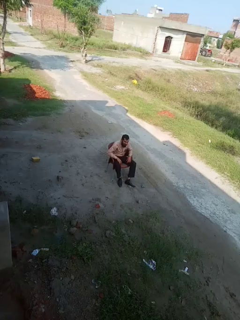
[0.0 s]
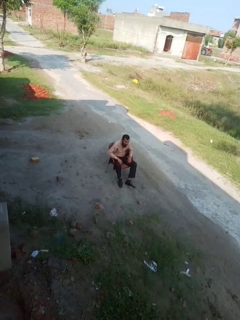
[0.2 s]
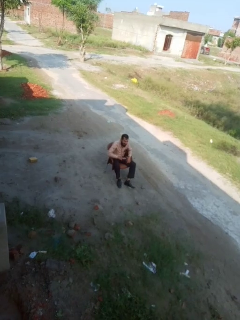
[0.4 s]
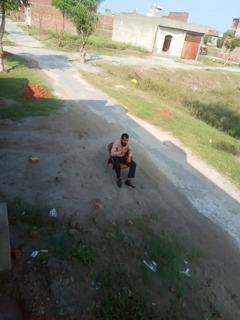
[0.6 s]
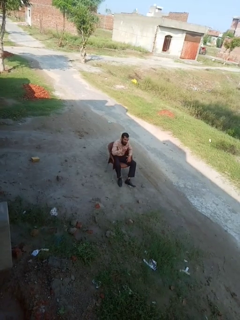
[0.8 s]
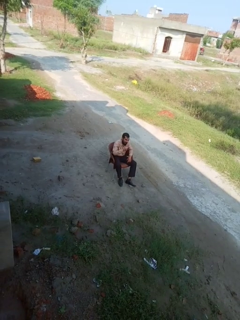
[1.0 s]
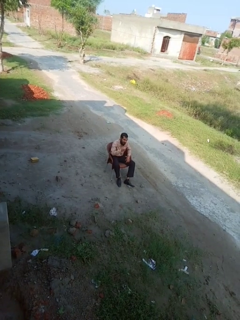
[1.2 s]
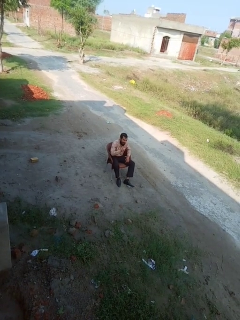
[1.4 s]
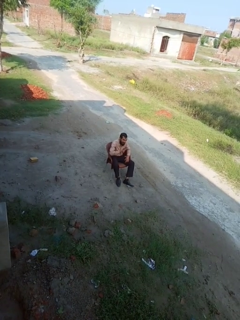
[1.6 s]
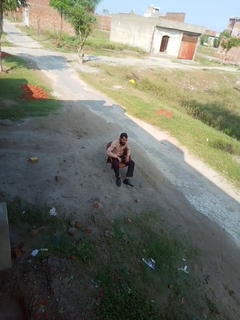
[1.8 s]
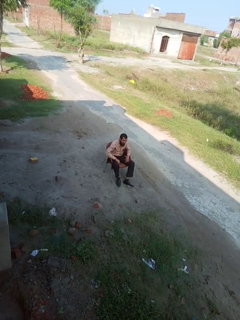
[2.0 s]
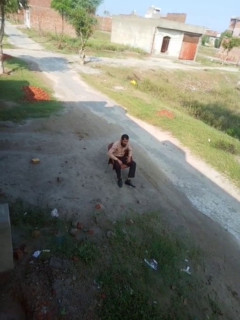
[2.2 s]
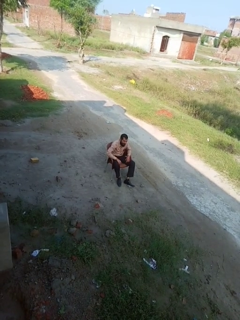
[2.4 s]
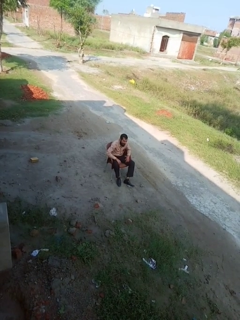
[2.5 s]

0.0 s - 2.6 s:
person gestures number four

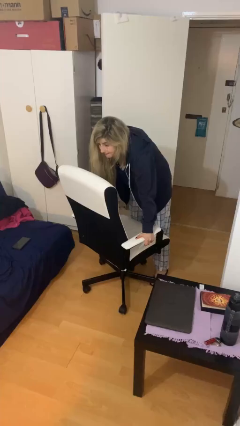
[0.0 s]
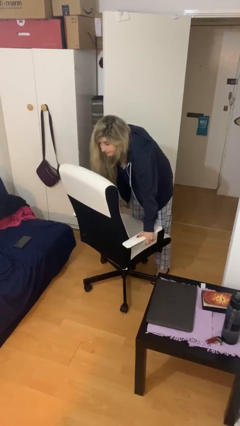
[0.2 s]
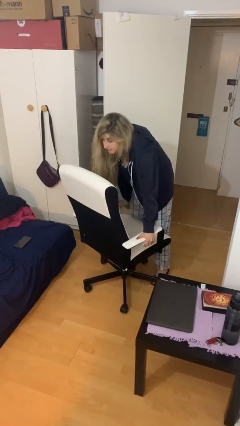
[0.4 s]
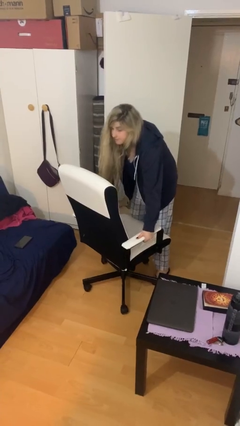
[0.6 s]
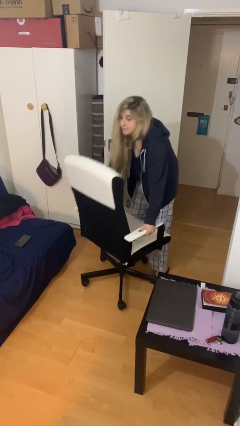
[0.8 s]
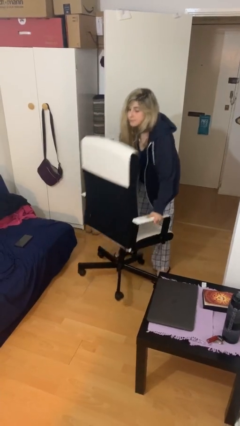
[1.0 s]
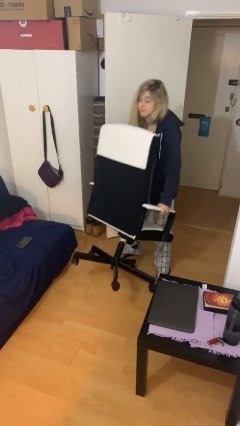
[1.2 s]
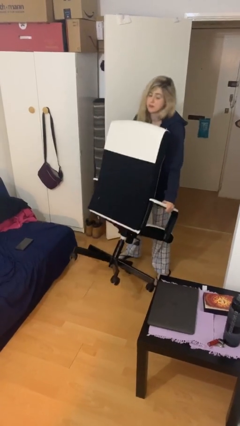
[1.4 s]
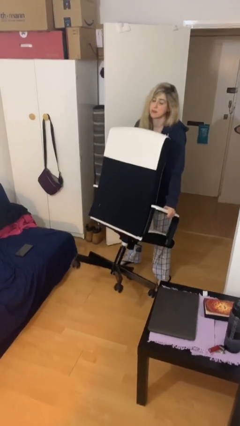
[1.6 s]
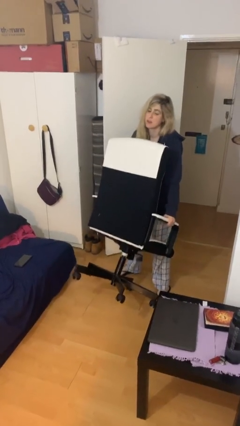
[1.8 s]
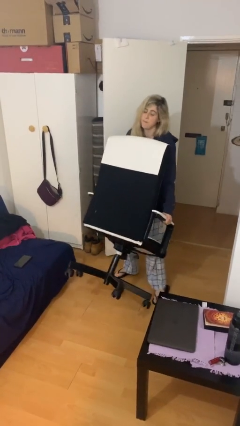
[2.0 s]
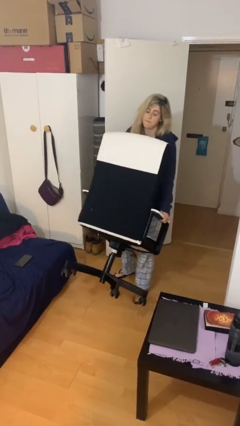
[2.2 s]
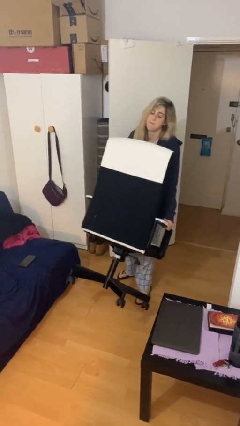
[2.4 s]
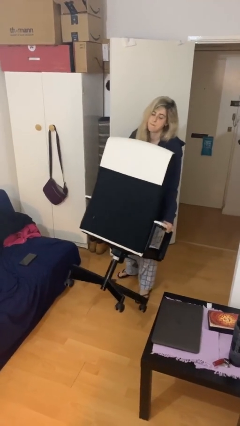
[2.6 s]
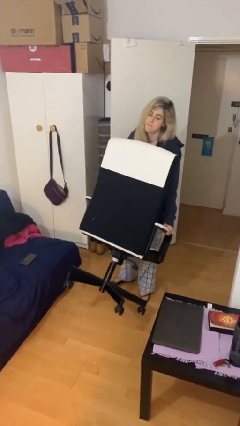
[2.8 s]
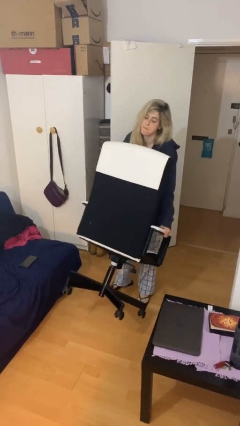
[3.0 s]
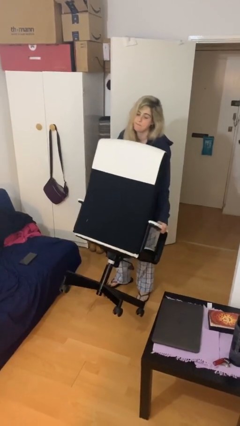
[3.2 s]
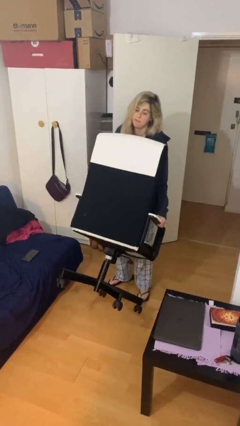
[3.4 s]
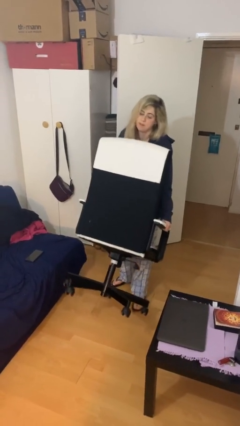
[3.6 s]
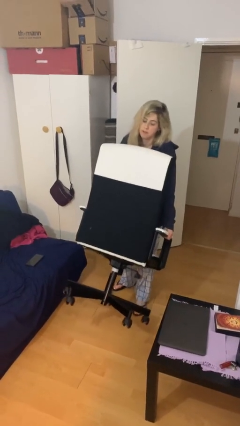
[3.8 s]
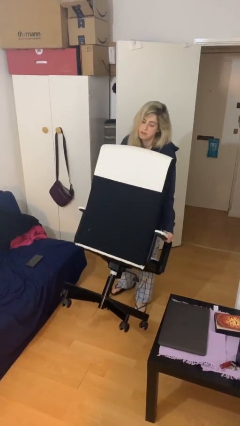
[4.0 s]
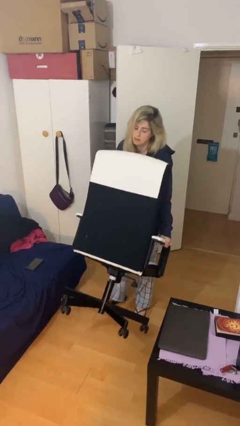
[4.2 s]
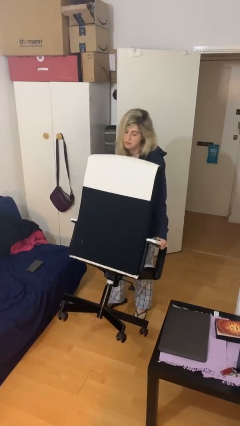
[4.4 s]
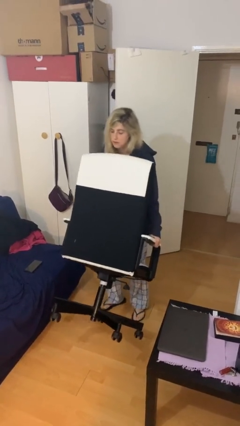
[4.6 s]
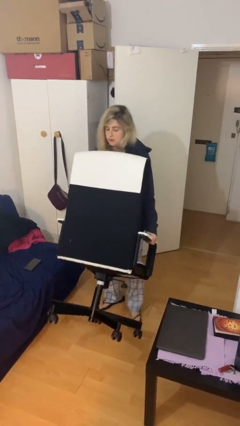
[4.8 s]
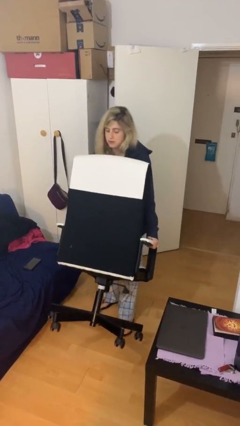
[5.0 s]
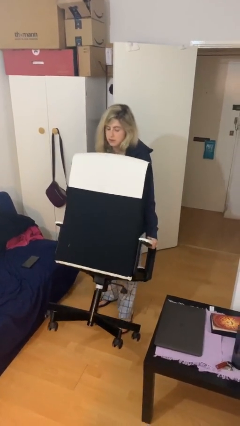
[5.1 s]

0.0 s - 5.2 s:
person carries heavy object

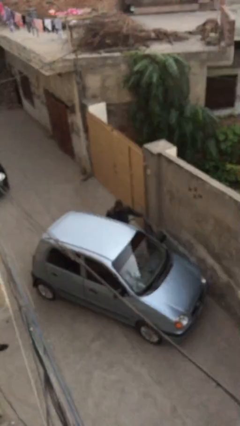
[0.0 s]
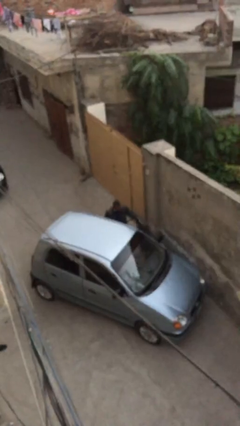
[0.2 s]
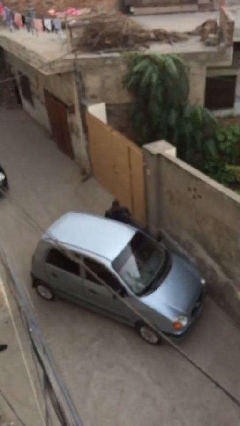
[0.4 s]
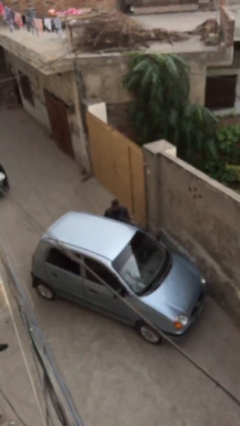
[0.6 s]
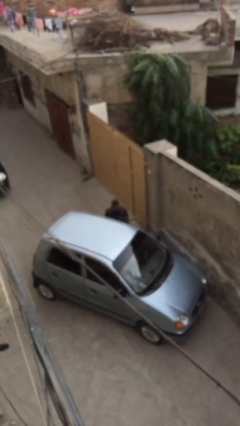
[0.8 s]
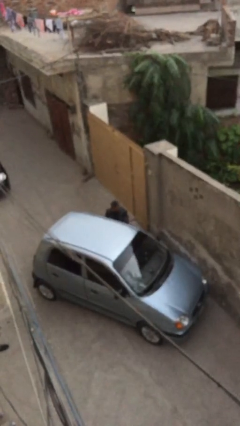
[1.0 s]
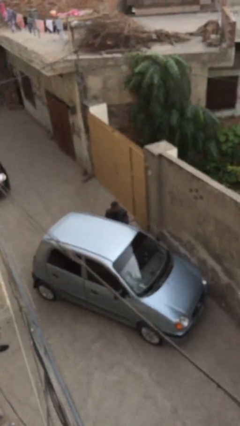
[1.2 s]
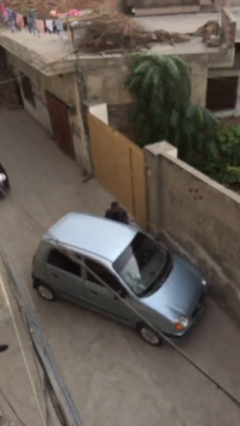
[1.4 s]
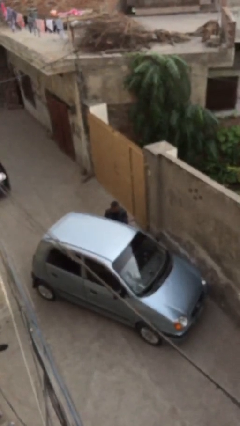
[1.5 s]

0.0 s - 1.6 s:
person closes car door

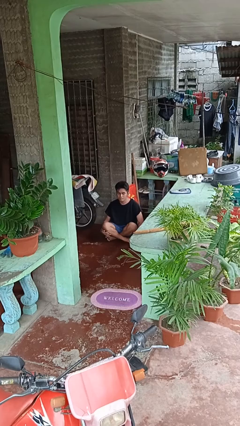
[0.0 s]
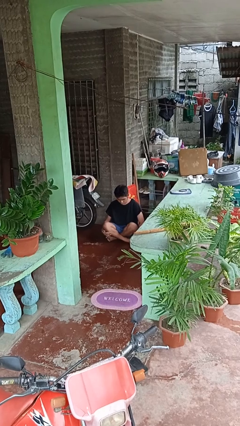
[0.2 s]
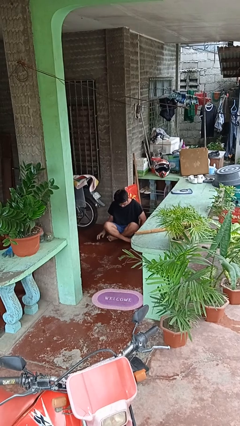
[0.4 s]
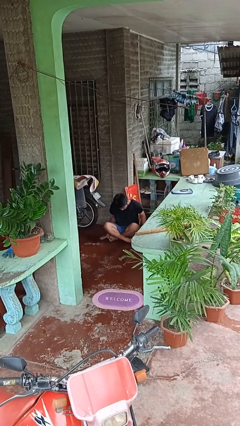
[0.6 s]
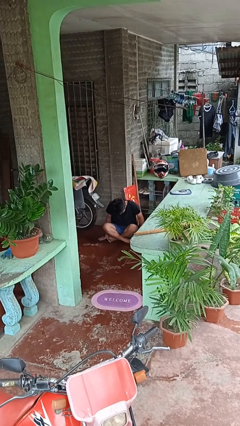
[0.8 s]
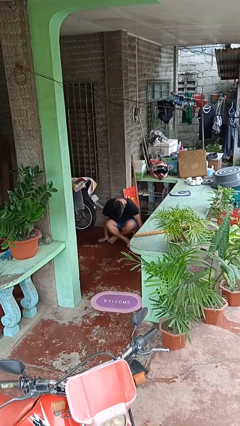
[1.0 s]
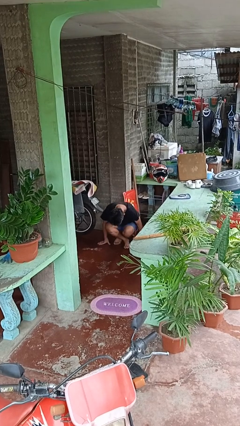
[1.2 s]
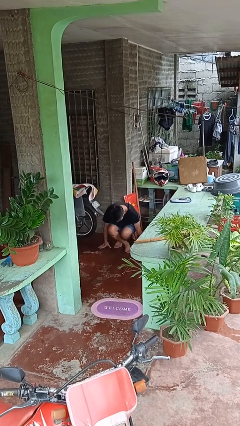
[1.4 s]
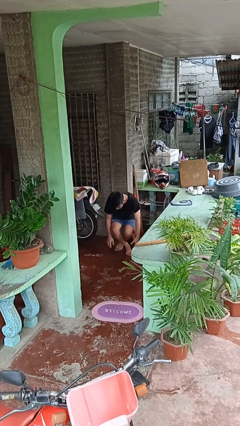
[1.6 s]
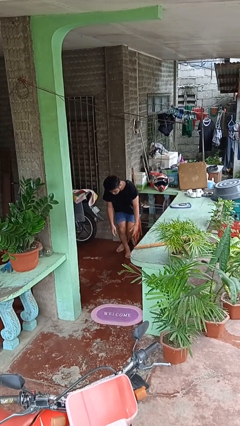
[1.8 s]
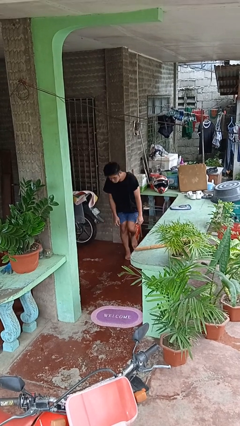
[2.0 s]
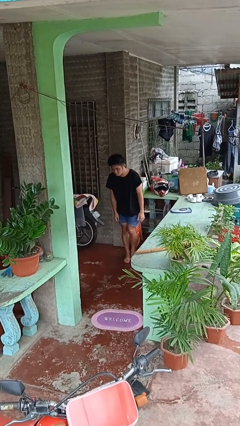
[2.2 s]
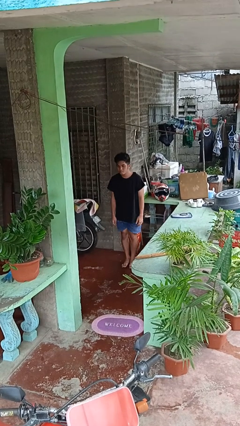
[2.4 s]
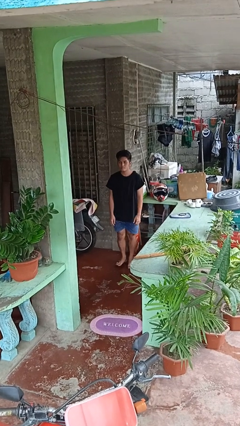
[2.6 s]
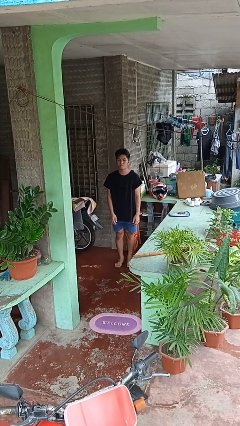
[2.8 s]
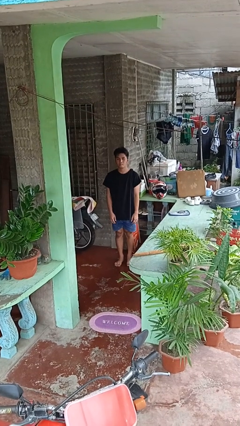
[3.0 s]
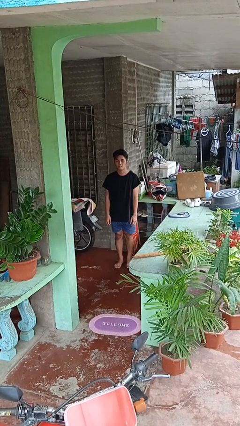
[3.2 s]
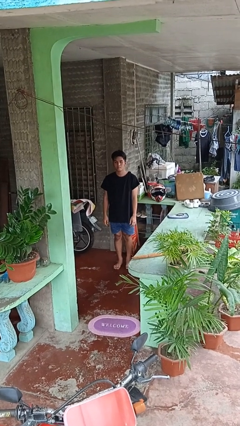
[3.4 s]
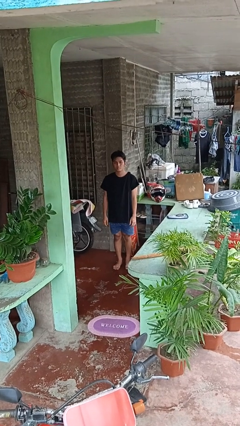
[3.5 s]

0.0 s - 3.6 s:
person stands up from floor

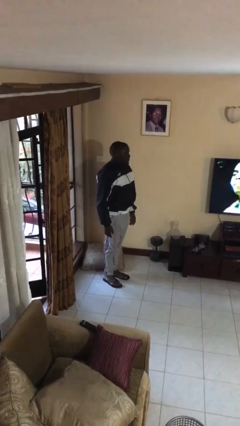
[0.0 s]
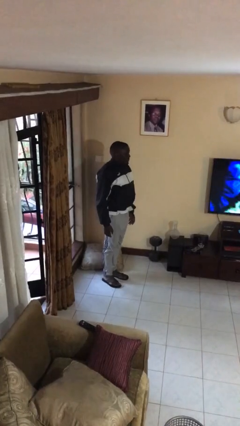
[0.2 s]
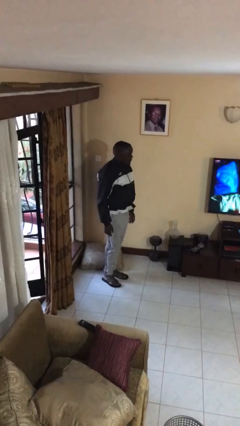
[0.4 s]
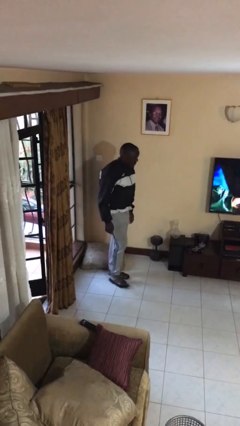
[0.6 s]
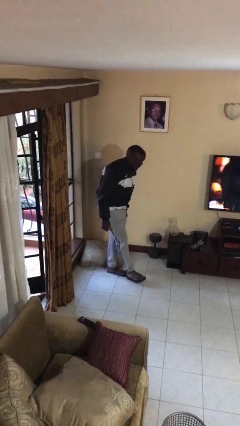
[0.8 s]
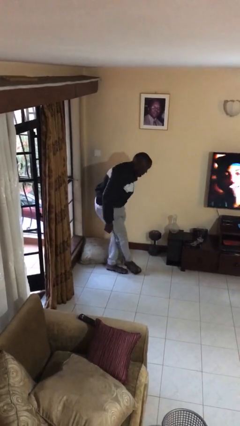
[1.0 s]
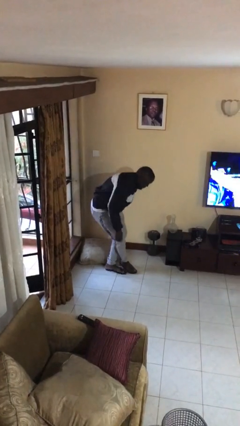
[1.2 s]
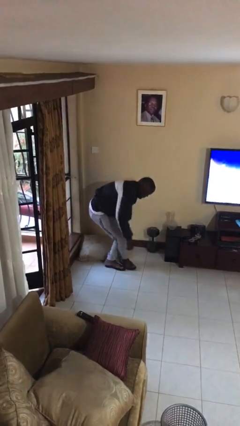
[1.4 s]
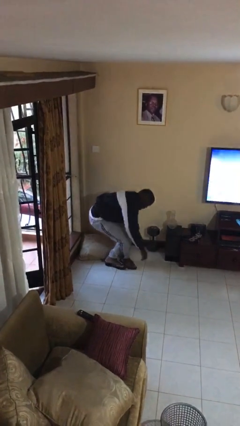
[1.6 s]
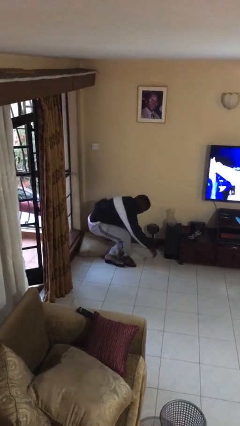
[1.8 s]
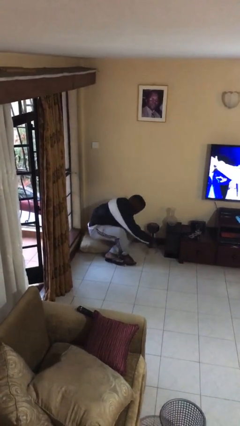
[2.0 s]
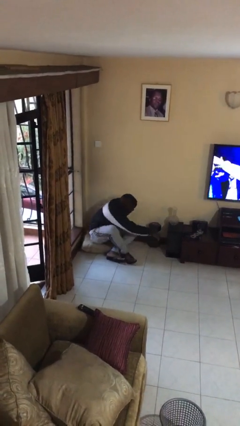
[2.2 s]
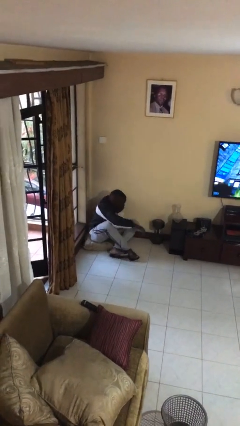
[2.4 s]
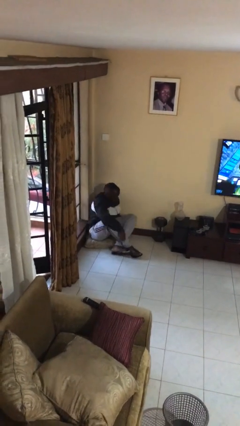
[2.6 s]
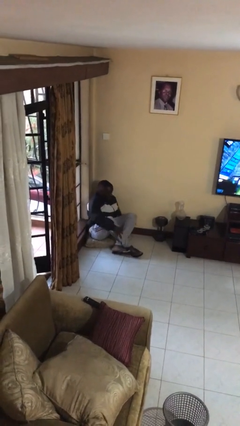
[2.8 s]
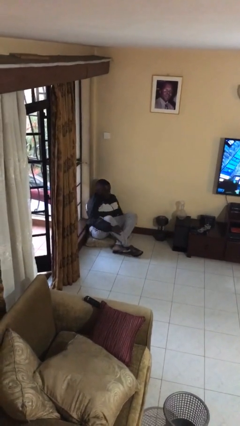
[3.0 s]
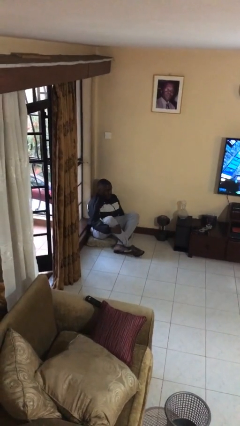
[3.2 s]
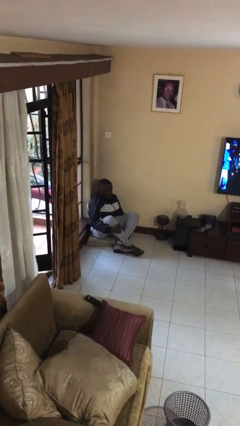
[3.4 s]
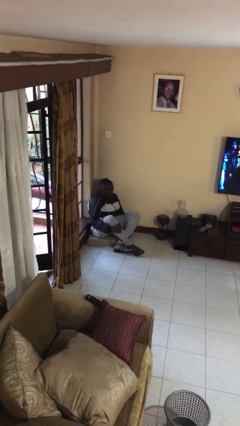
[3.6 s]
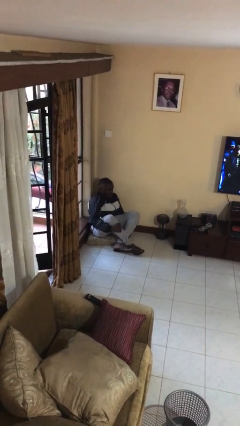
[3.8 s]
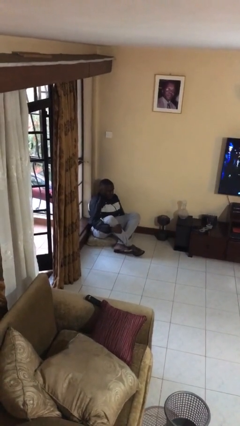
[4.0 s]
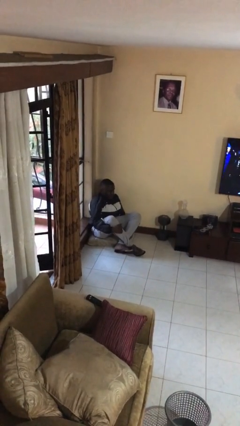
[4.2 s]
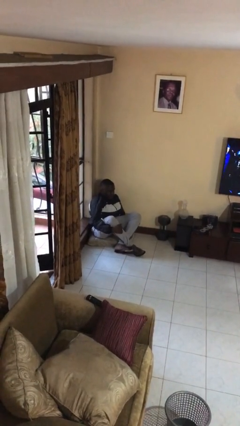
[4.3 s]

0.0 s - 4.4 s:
person sits crisscross

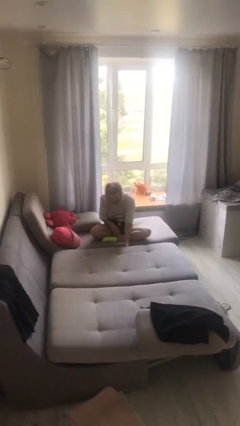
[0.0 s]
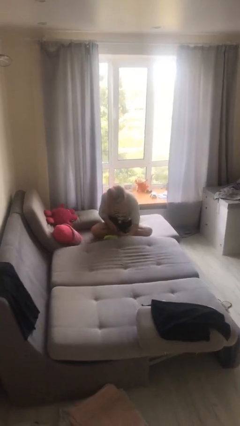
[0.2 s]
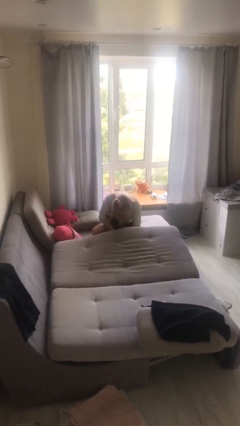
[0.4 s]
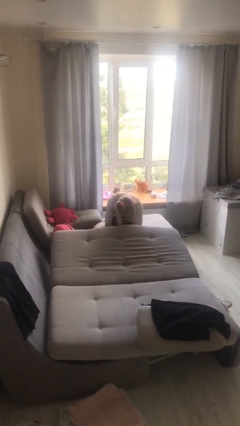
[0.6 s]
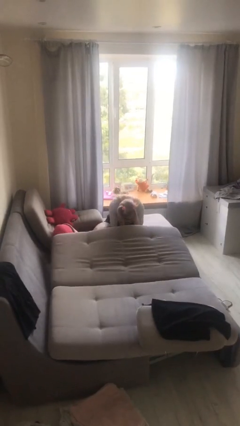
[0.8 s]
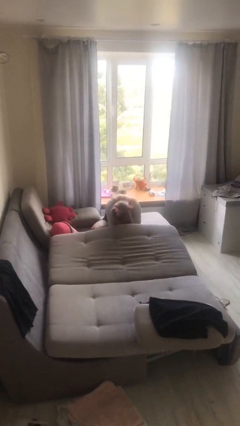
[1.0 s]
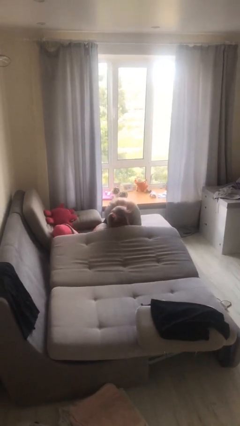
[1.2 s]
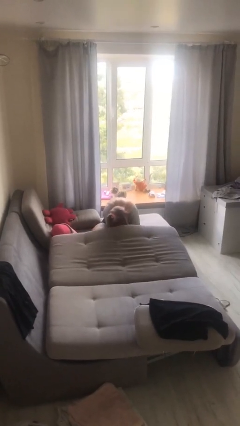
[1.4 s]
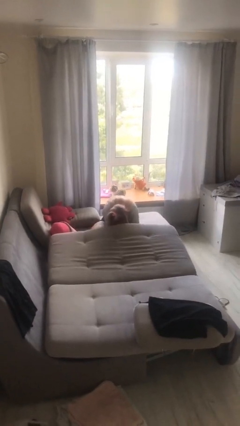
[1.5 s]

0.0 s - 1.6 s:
person searches under bed
